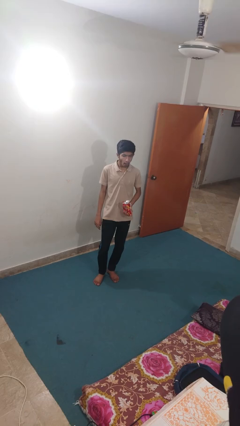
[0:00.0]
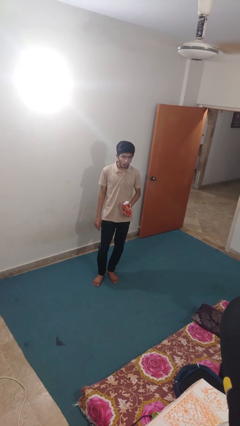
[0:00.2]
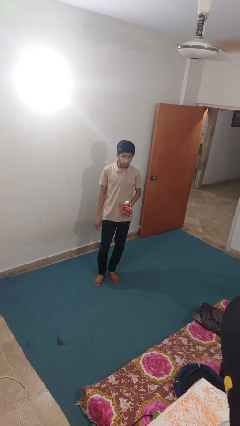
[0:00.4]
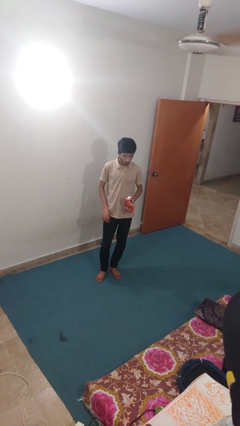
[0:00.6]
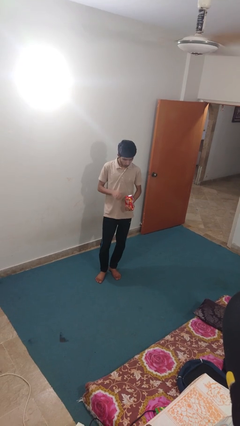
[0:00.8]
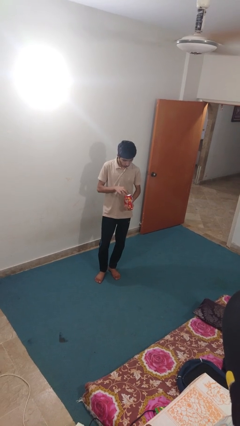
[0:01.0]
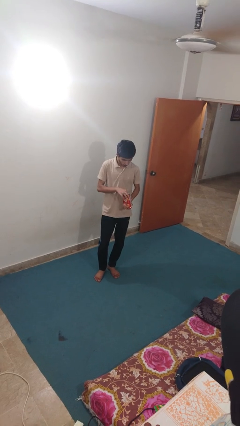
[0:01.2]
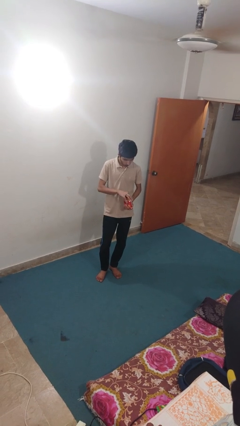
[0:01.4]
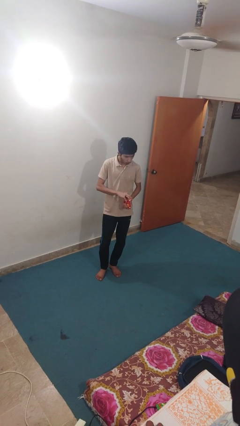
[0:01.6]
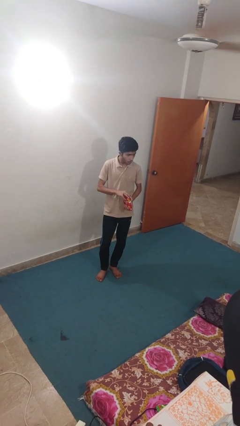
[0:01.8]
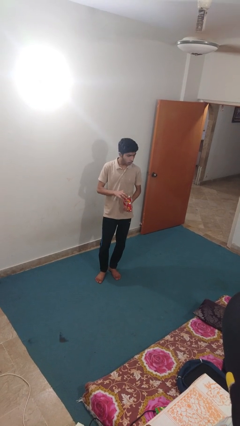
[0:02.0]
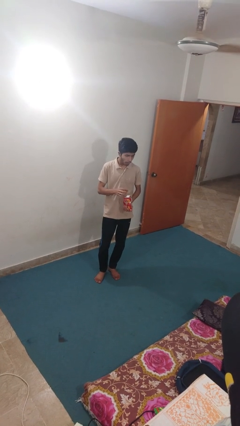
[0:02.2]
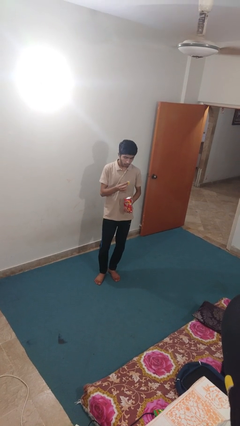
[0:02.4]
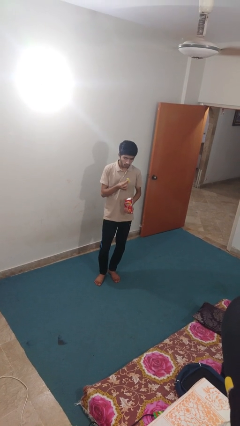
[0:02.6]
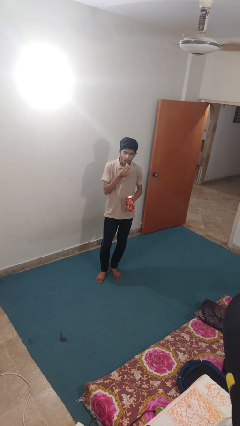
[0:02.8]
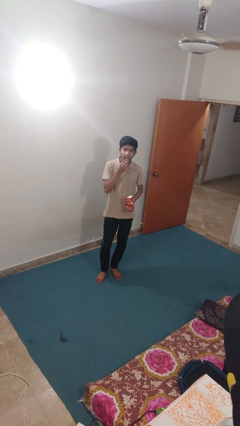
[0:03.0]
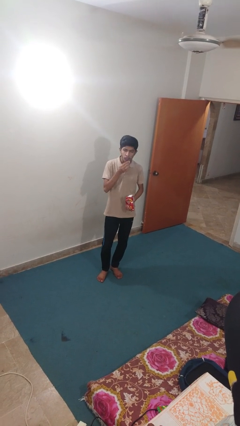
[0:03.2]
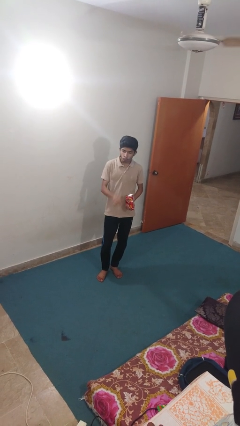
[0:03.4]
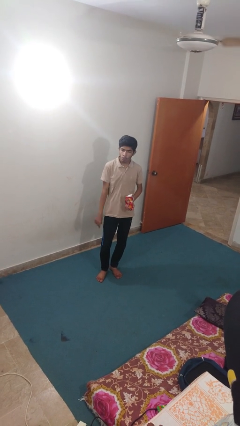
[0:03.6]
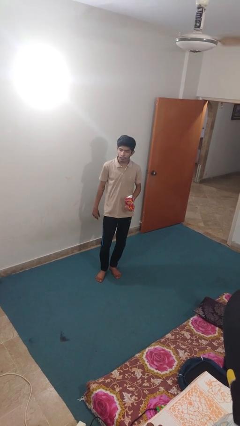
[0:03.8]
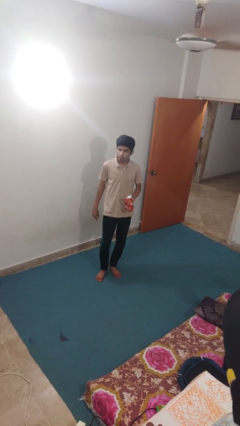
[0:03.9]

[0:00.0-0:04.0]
person eats snack from bag

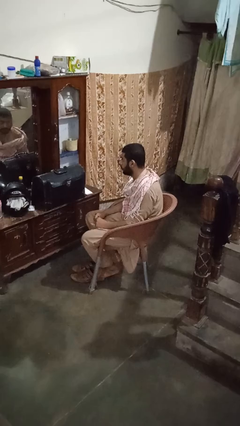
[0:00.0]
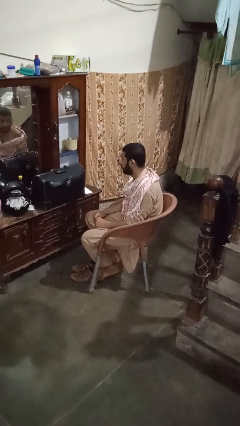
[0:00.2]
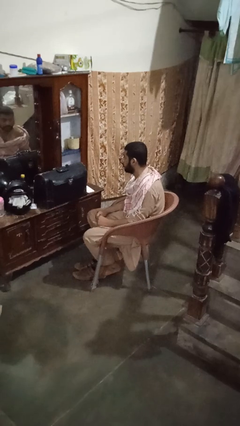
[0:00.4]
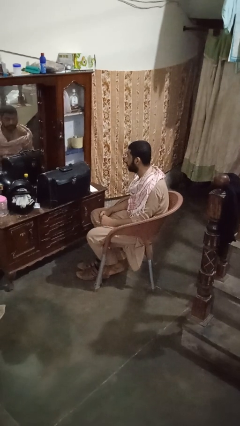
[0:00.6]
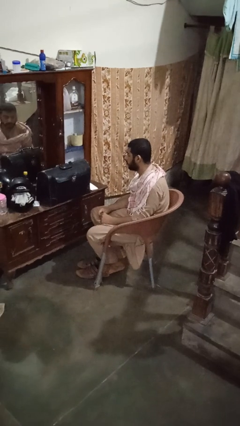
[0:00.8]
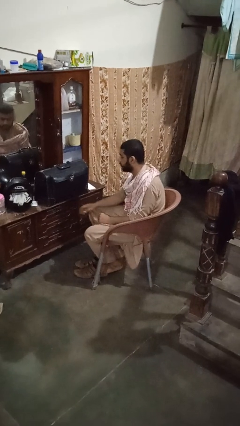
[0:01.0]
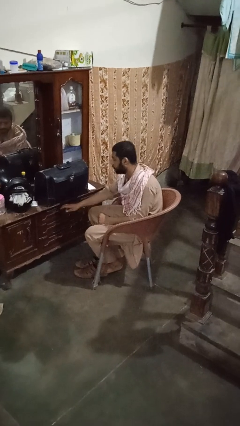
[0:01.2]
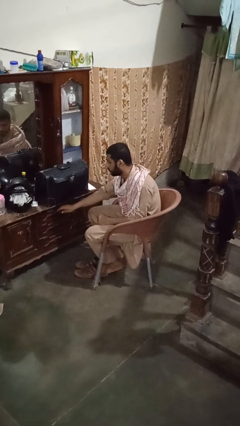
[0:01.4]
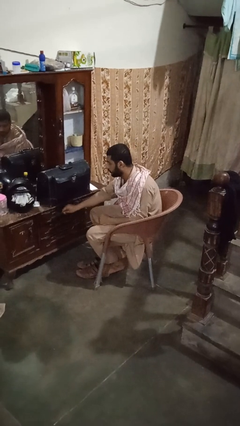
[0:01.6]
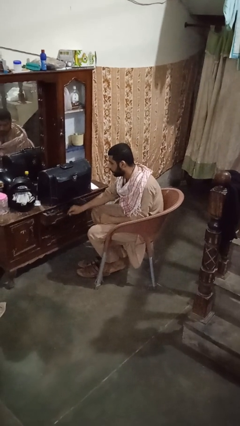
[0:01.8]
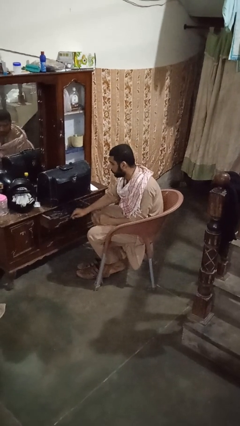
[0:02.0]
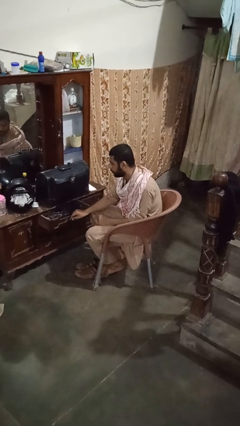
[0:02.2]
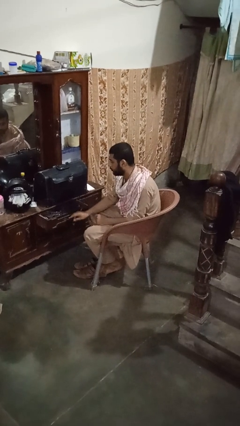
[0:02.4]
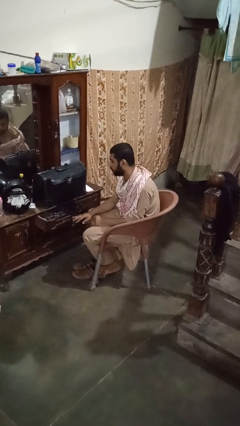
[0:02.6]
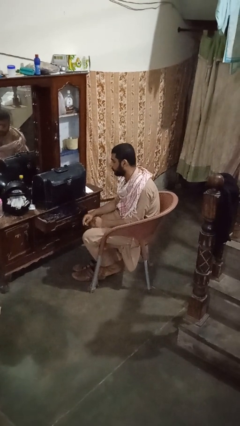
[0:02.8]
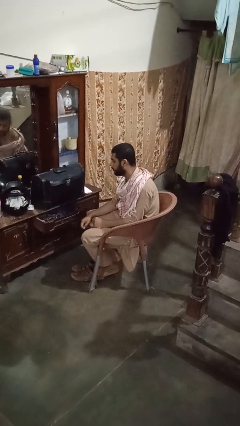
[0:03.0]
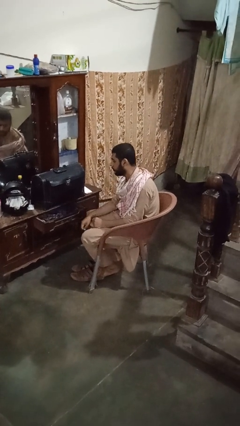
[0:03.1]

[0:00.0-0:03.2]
person opens dresser drawer

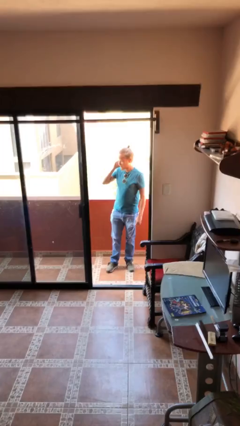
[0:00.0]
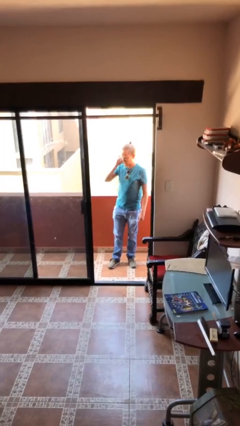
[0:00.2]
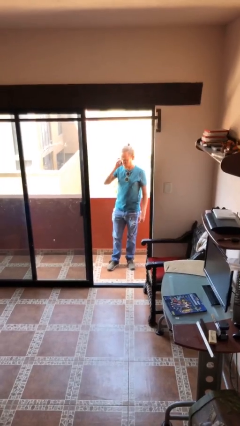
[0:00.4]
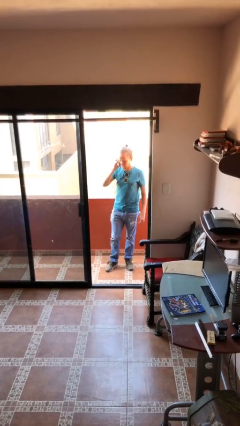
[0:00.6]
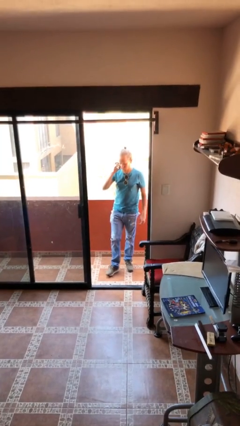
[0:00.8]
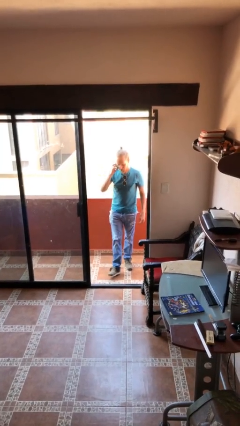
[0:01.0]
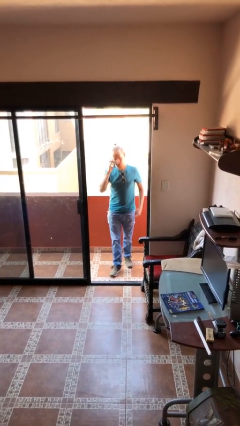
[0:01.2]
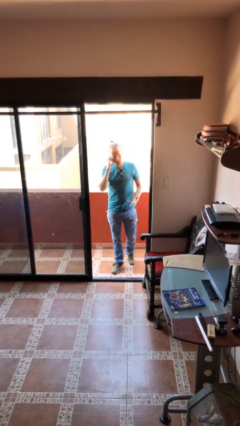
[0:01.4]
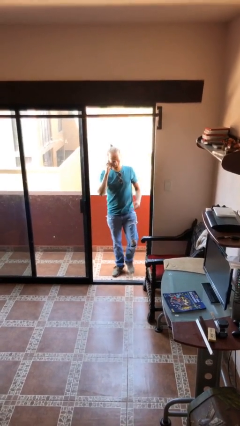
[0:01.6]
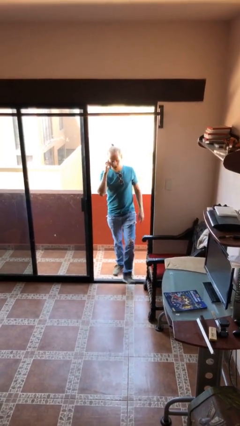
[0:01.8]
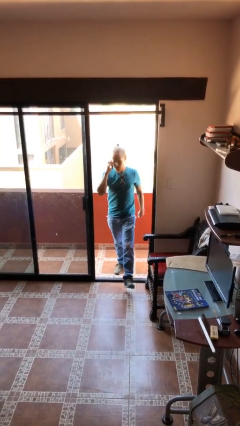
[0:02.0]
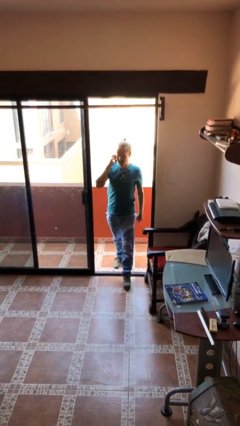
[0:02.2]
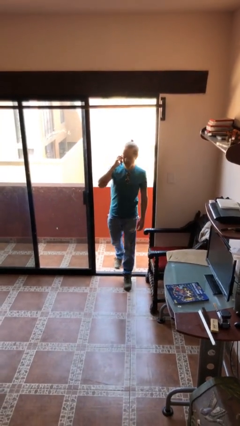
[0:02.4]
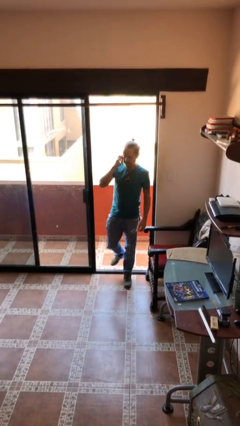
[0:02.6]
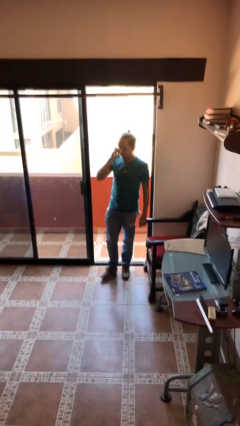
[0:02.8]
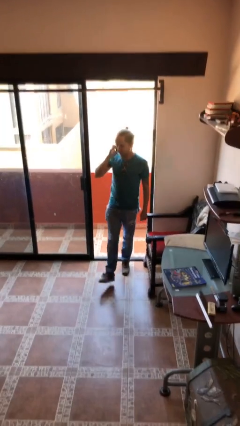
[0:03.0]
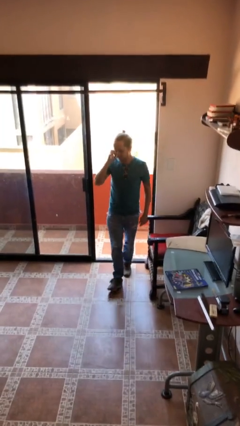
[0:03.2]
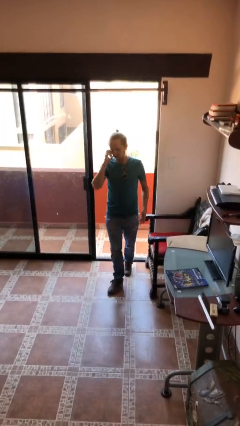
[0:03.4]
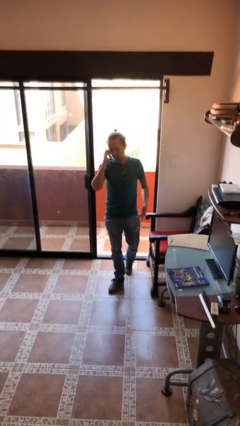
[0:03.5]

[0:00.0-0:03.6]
person enters scene through structure

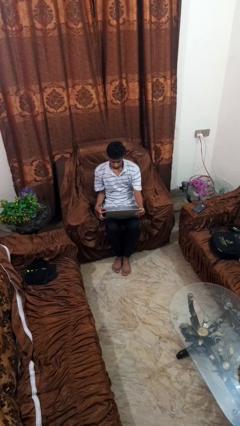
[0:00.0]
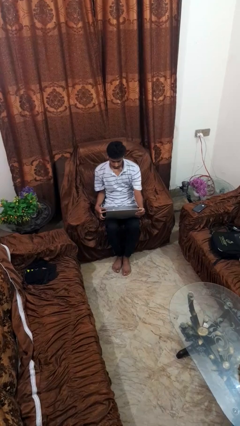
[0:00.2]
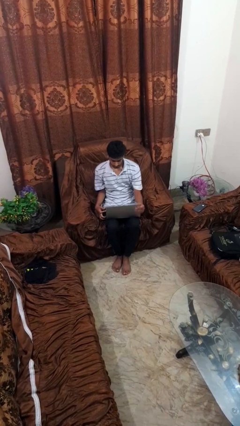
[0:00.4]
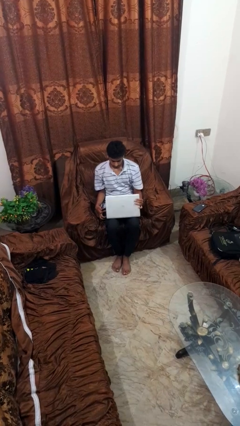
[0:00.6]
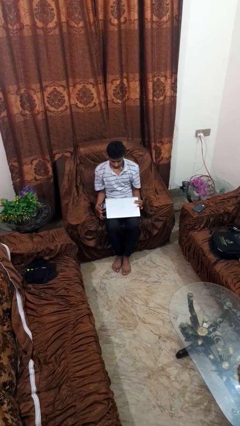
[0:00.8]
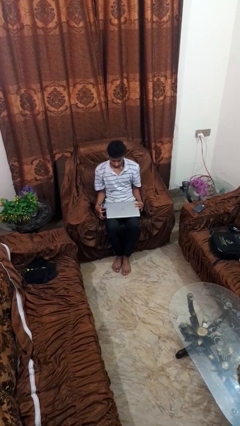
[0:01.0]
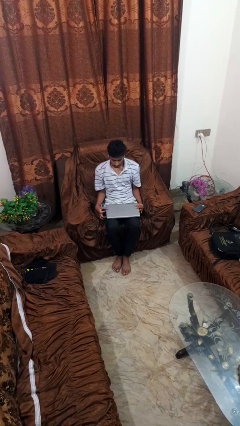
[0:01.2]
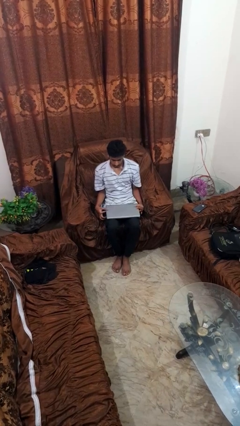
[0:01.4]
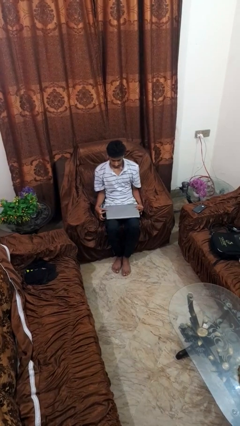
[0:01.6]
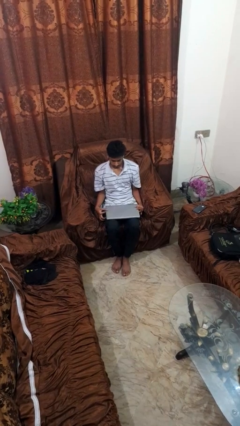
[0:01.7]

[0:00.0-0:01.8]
person closes laptop

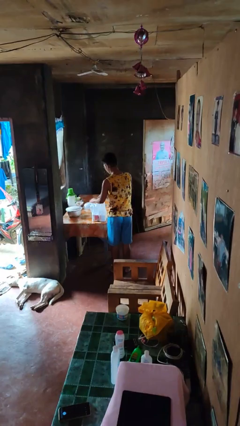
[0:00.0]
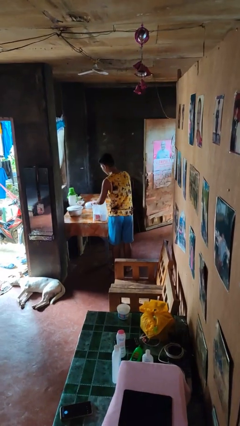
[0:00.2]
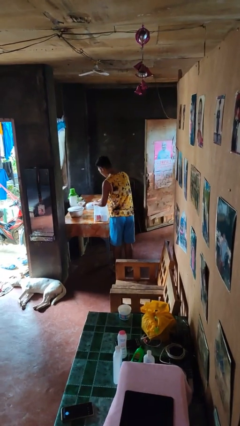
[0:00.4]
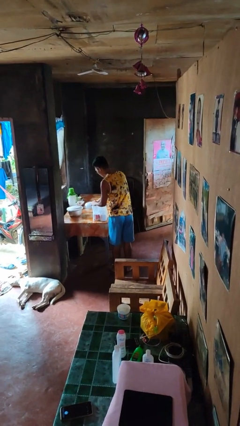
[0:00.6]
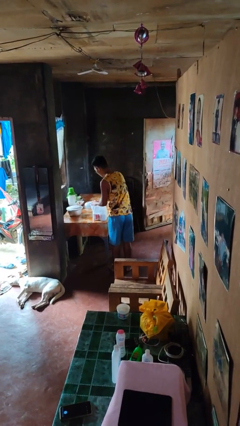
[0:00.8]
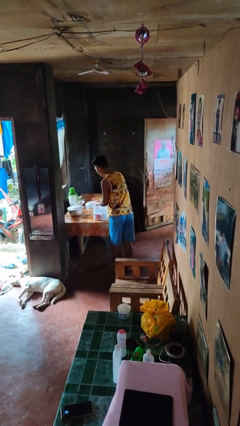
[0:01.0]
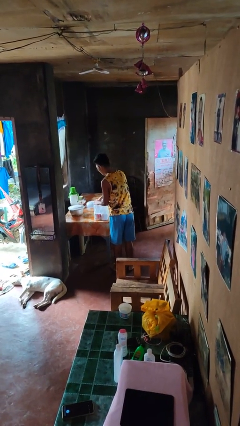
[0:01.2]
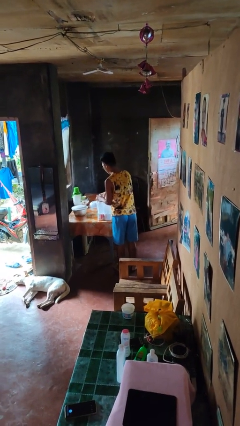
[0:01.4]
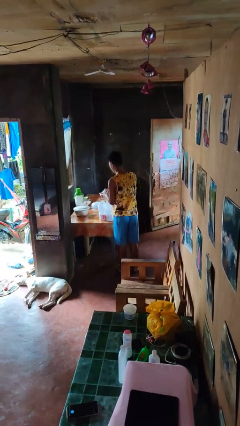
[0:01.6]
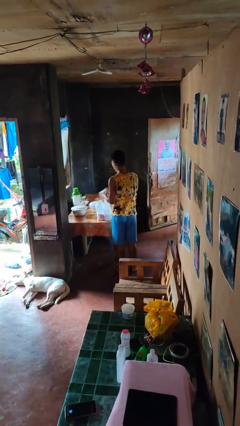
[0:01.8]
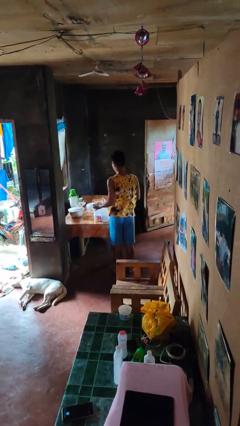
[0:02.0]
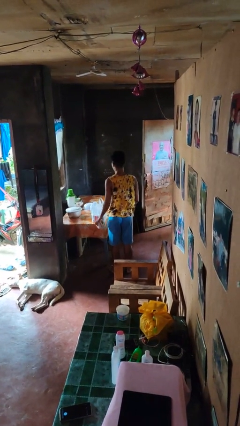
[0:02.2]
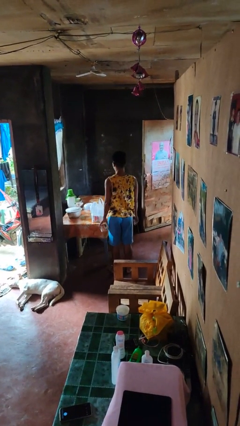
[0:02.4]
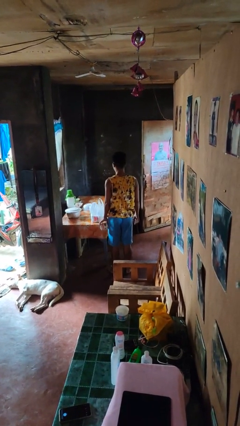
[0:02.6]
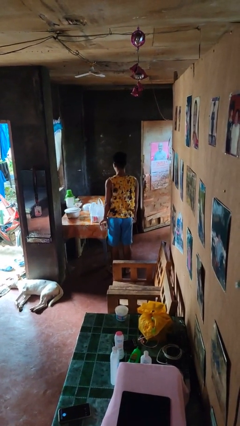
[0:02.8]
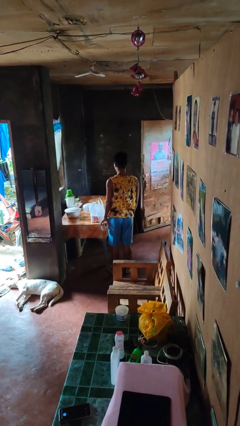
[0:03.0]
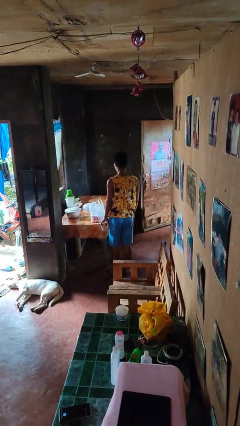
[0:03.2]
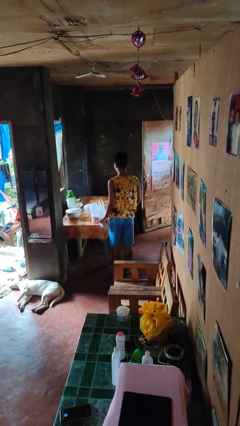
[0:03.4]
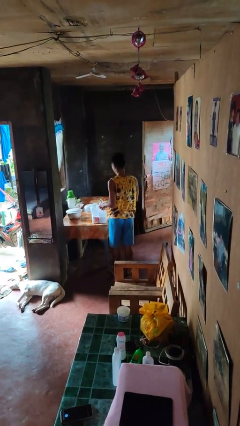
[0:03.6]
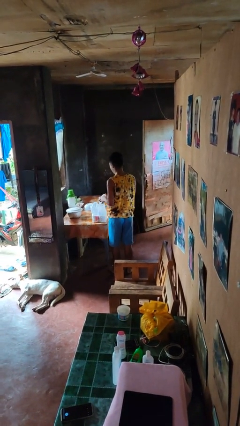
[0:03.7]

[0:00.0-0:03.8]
person takes object from bag

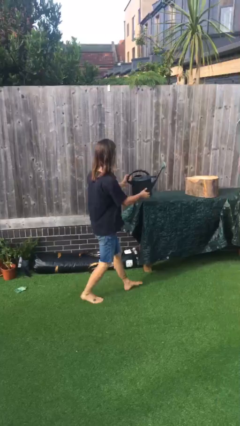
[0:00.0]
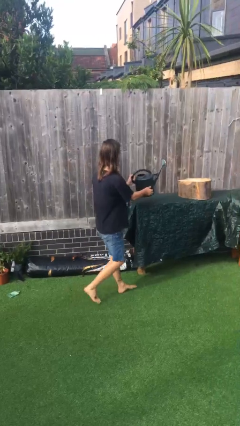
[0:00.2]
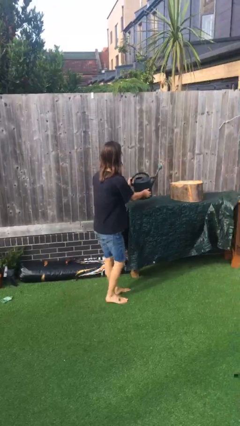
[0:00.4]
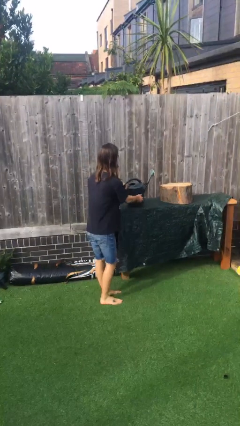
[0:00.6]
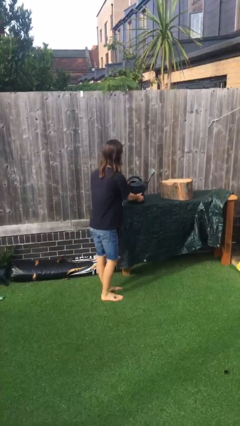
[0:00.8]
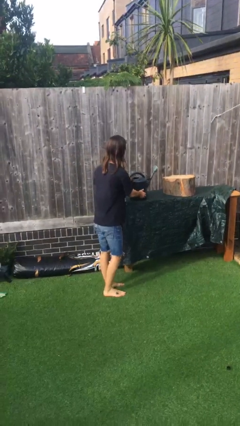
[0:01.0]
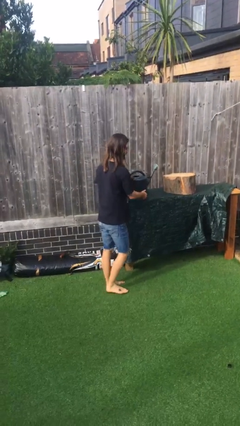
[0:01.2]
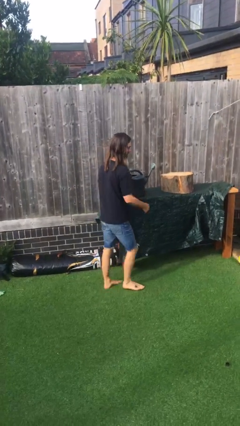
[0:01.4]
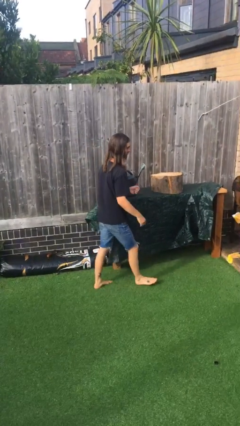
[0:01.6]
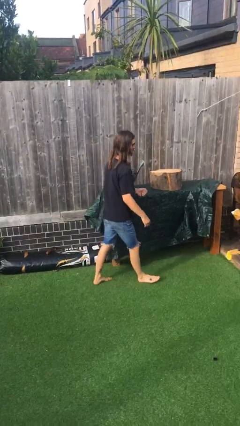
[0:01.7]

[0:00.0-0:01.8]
person puts down object on table
